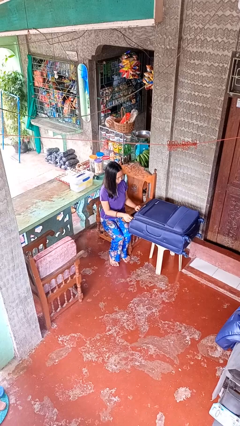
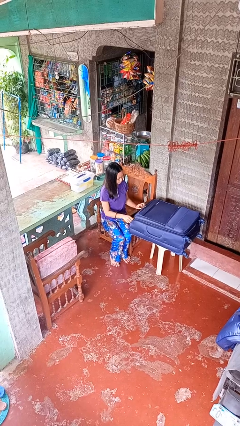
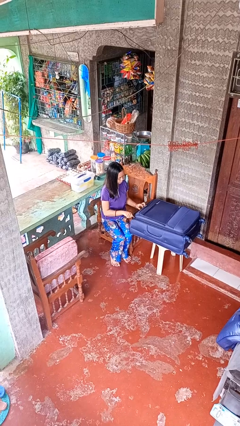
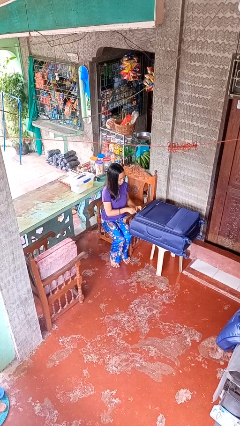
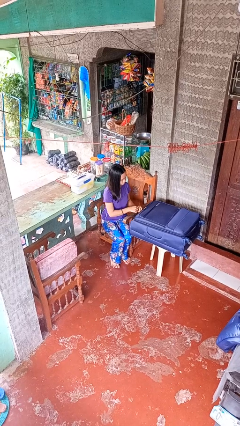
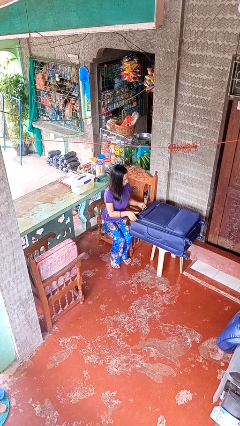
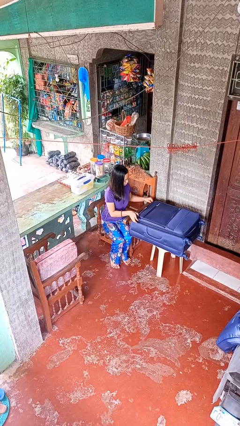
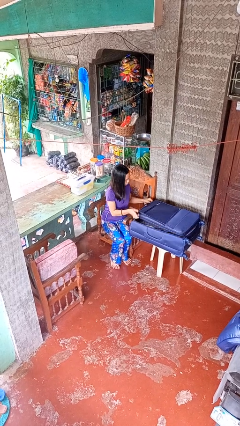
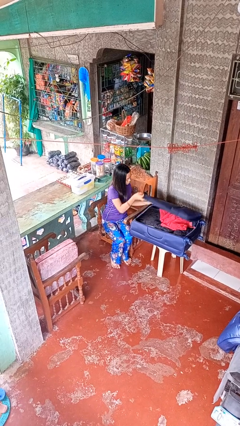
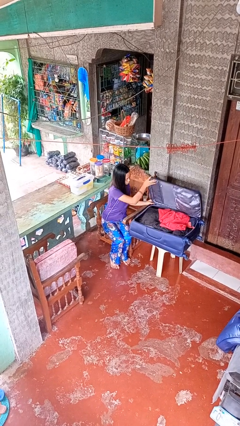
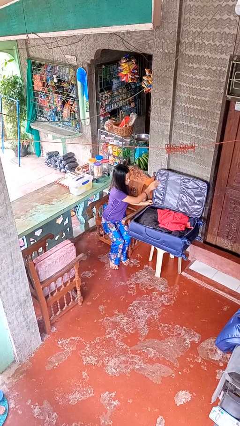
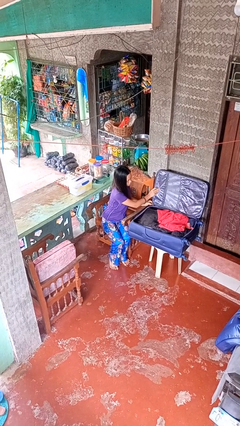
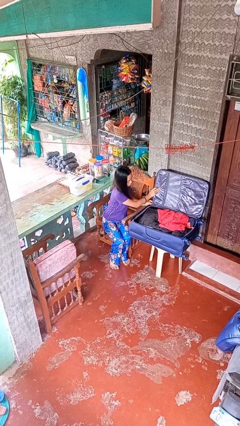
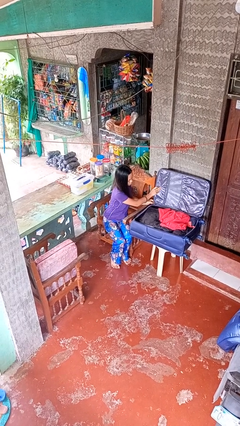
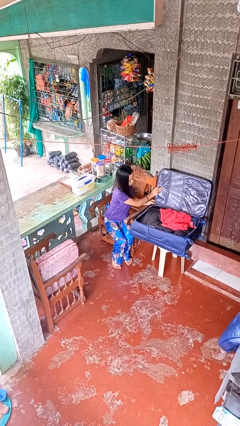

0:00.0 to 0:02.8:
person opens suitcase

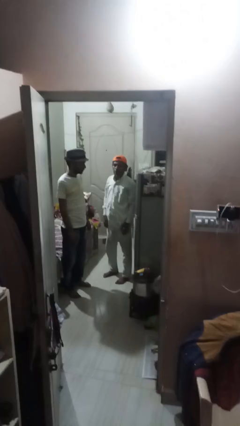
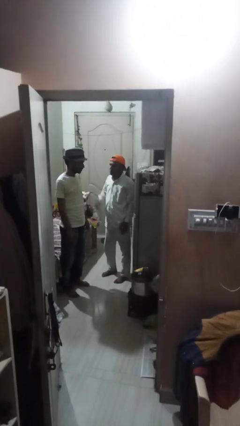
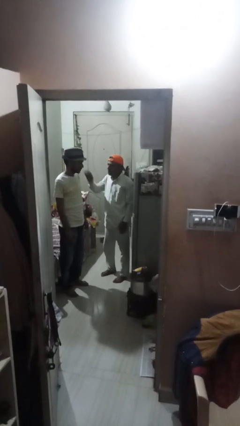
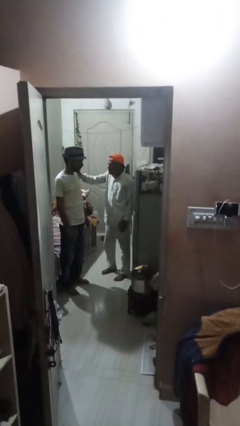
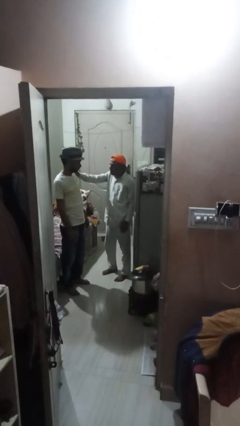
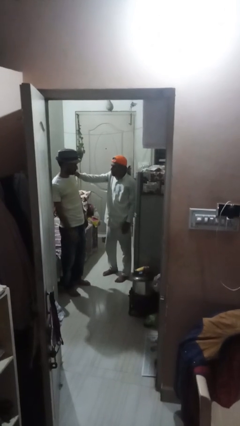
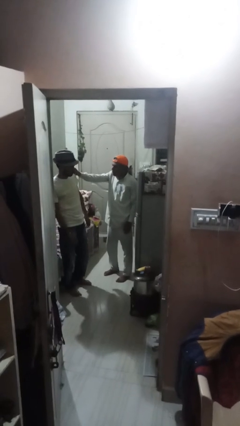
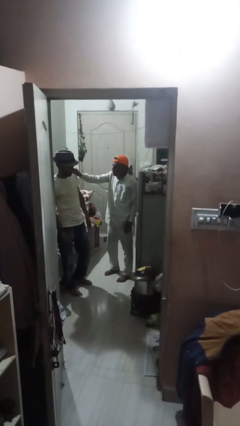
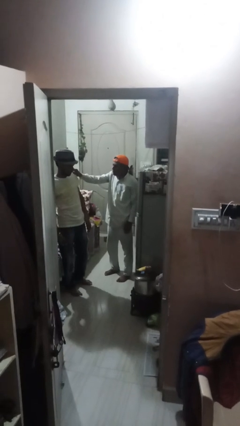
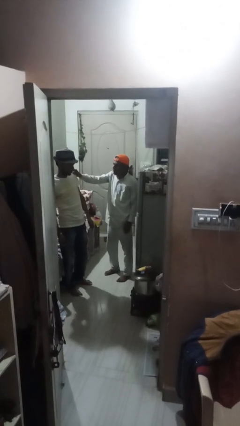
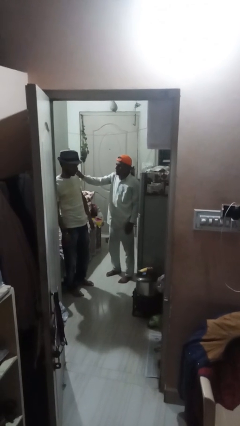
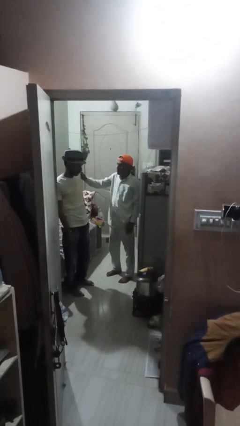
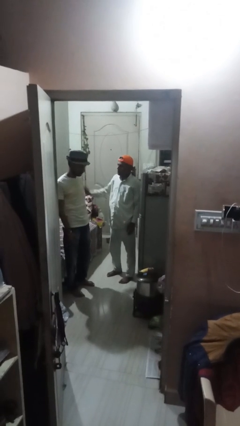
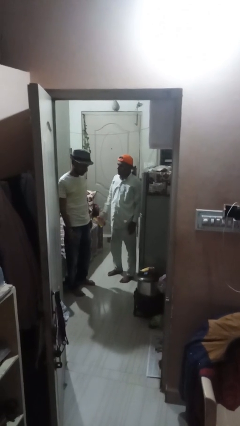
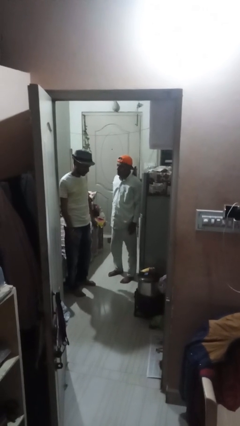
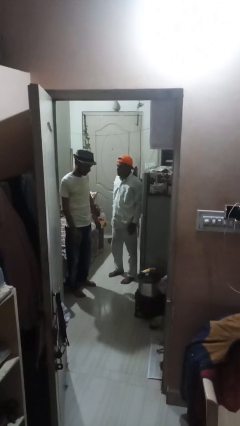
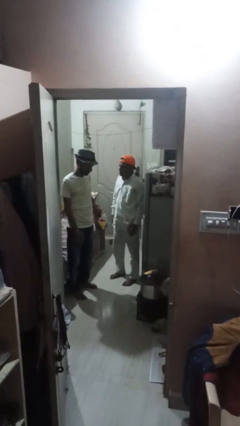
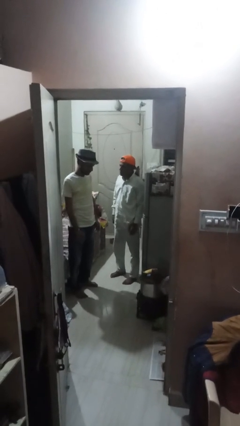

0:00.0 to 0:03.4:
person shoves person

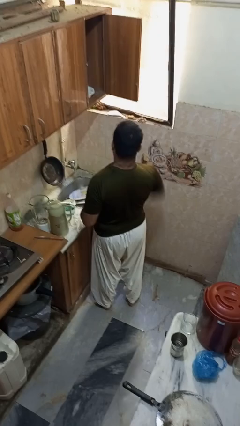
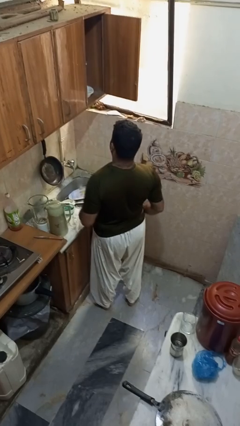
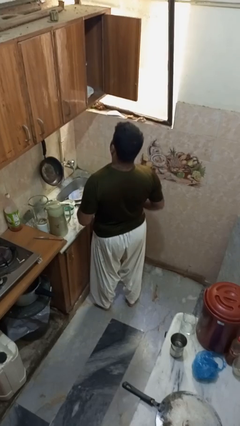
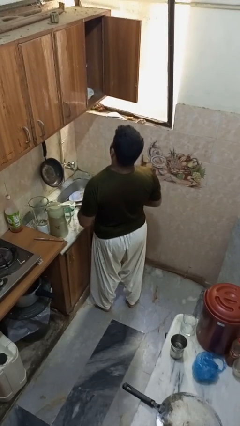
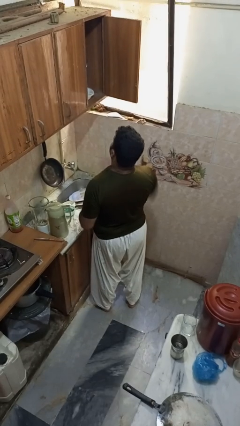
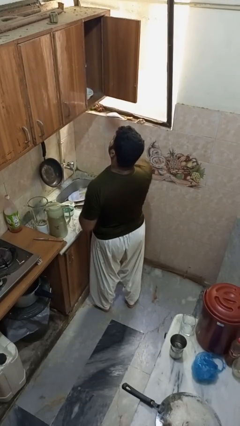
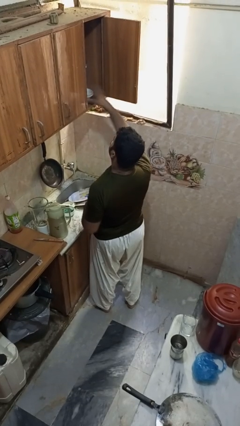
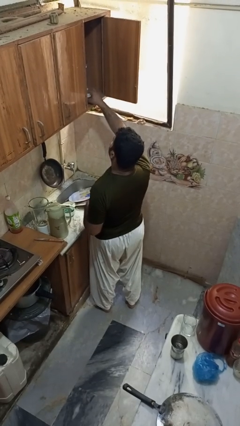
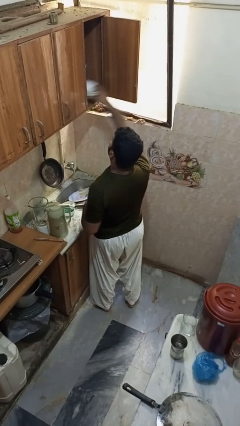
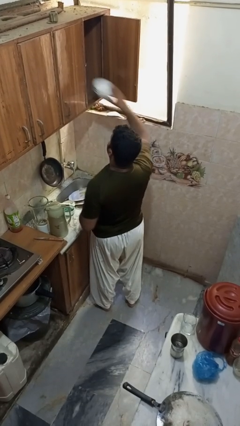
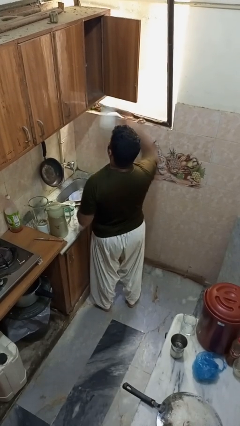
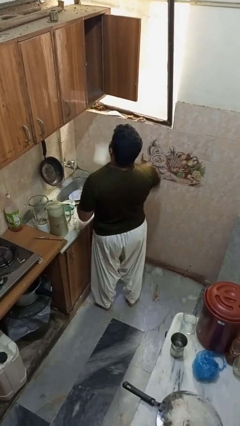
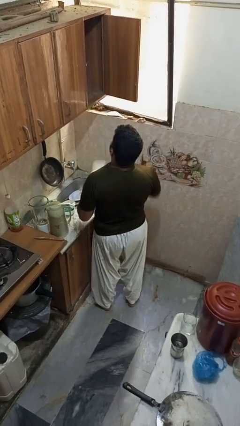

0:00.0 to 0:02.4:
person takes object from cabinet

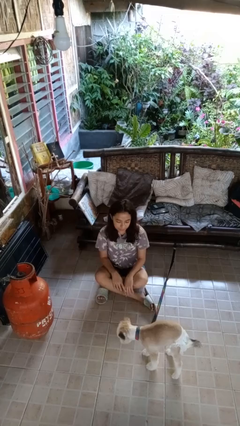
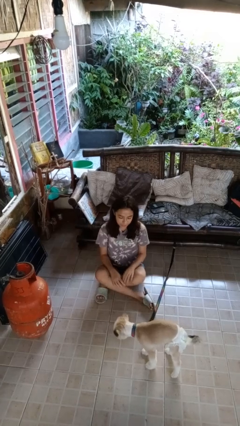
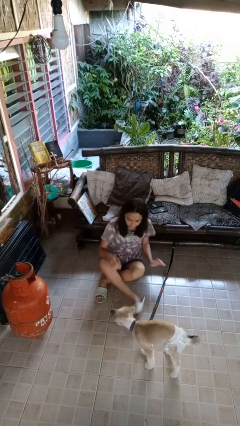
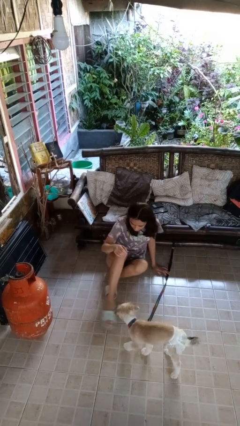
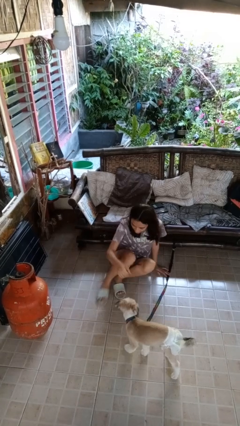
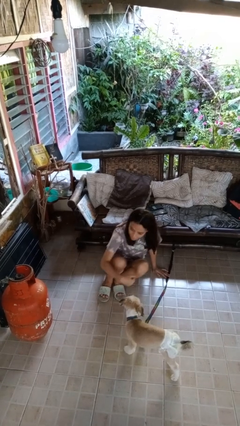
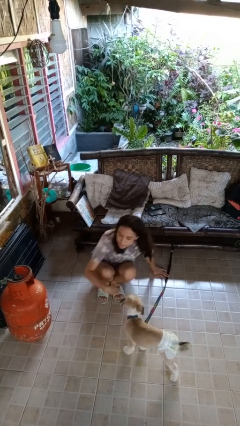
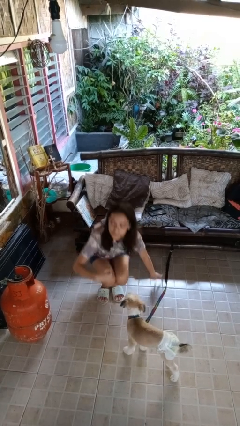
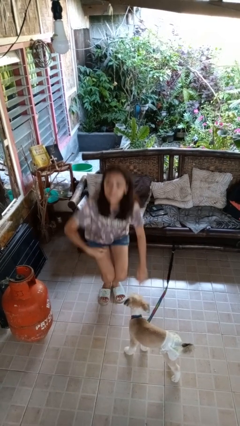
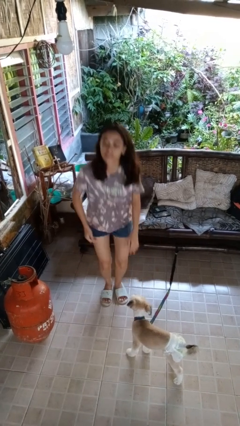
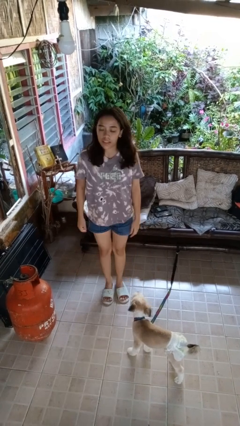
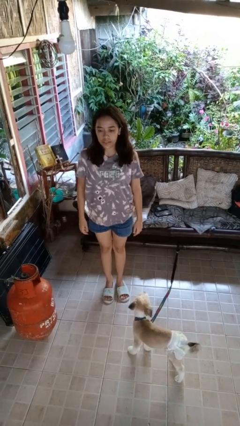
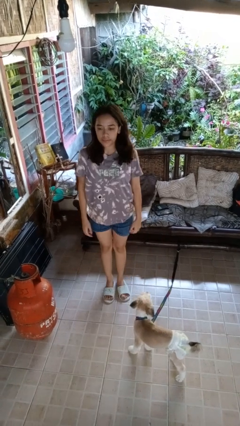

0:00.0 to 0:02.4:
person stands up from floor

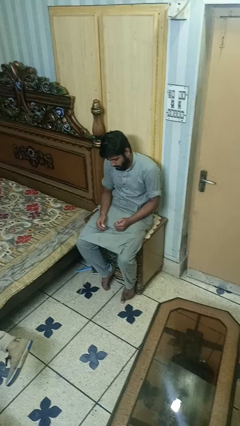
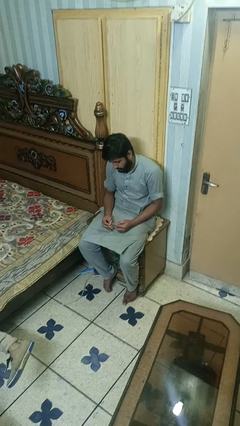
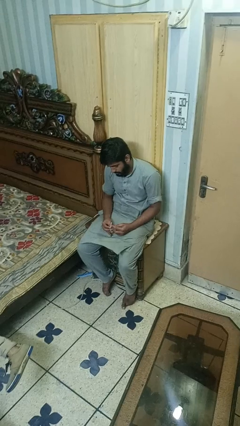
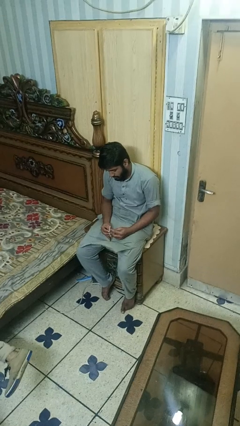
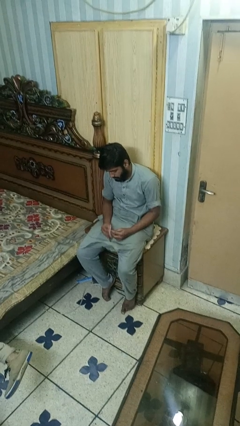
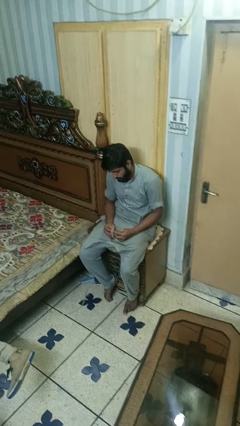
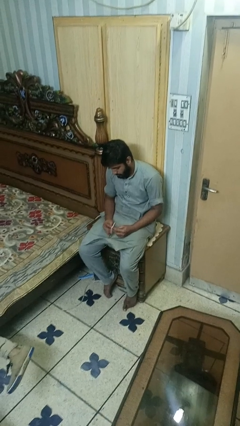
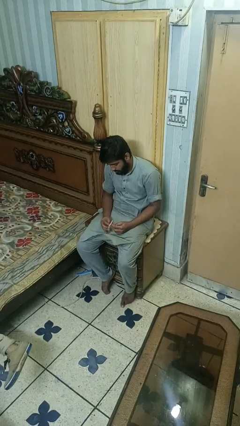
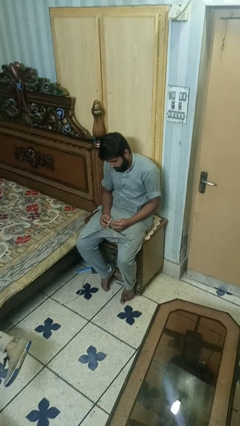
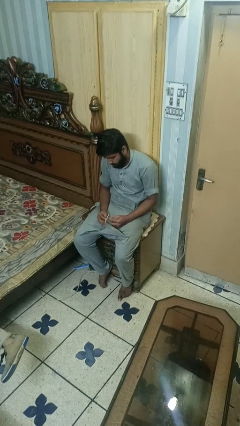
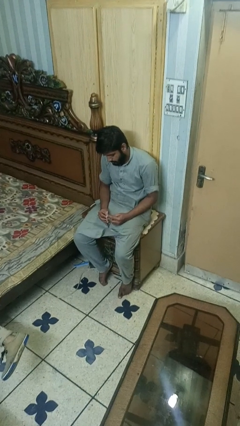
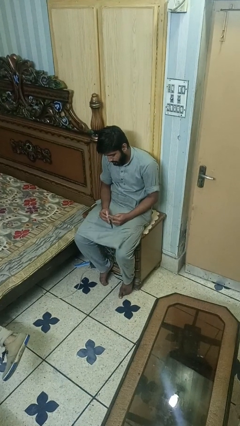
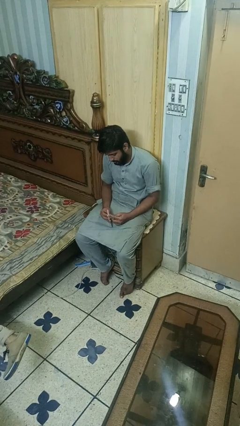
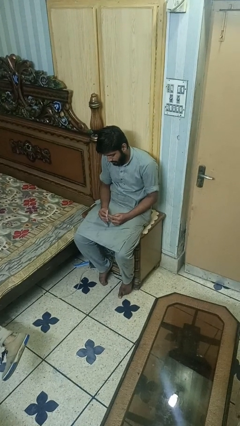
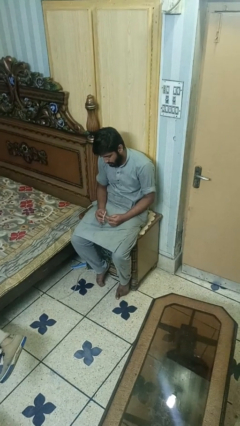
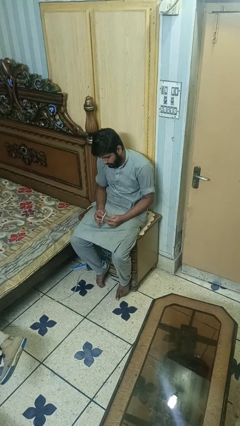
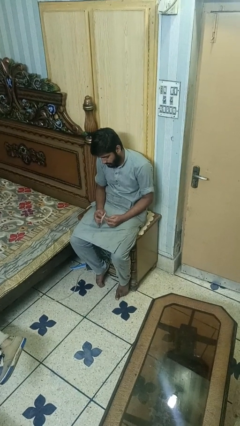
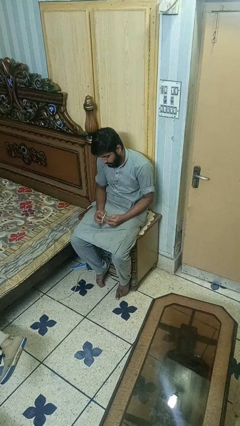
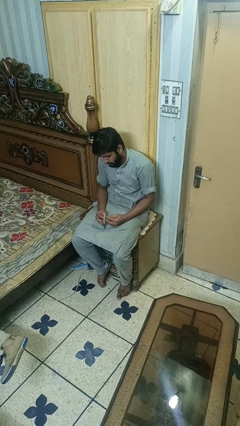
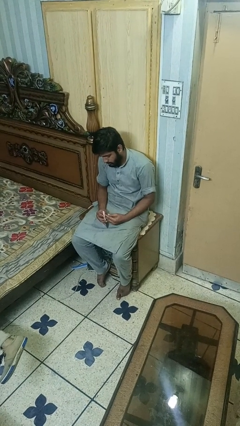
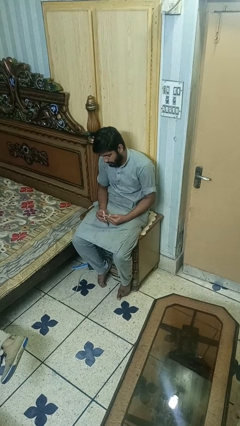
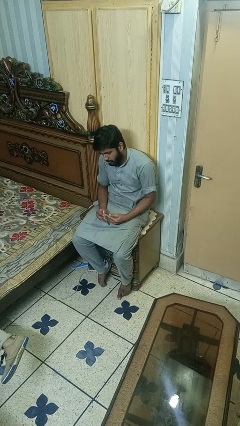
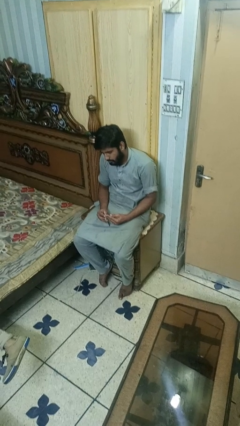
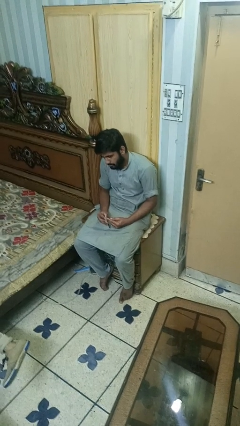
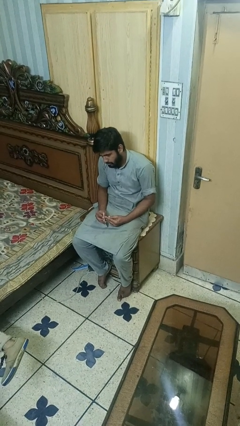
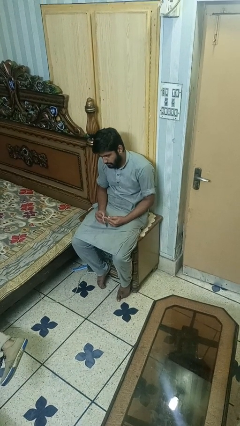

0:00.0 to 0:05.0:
person files fingernails

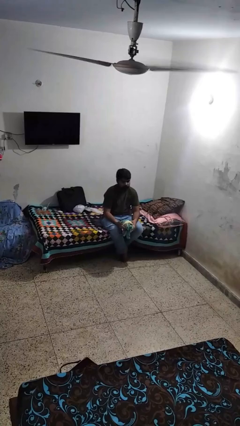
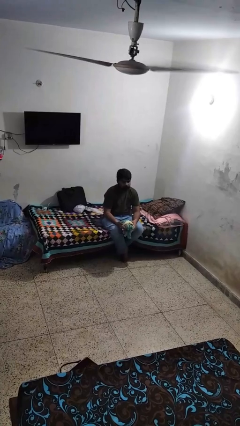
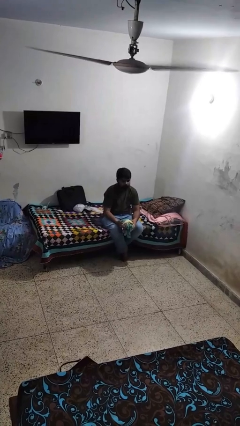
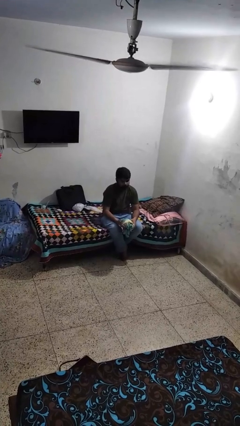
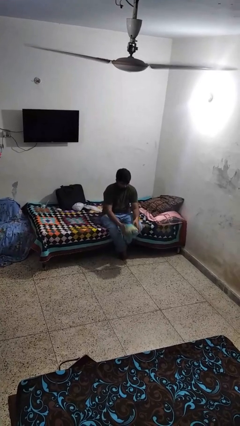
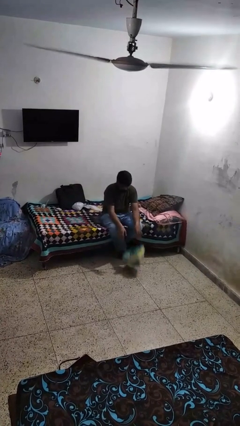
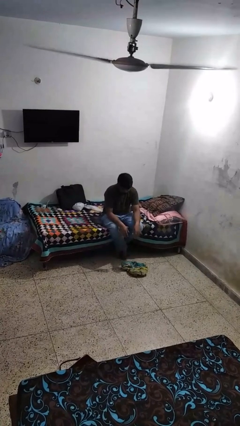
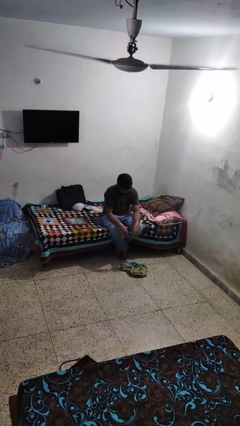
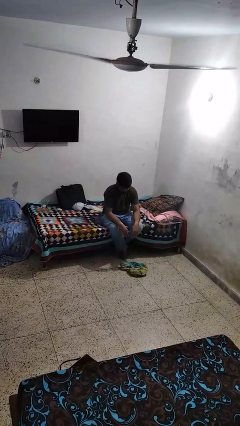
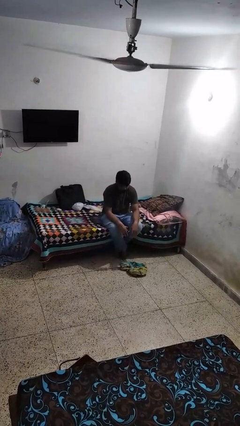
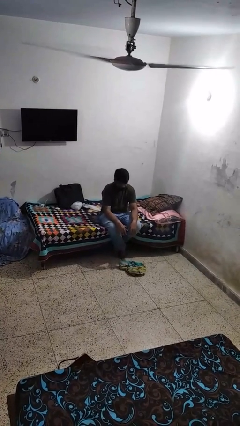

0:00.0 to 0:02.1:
person drops object
